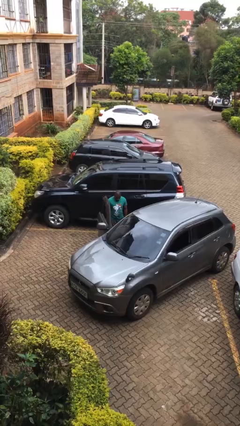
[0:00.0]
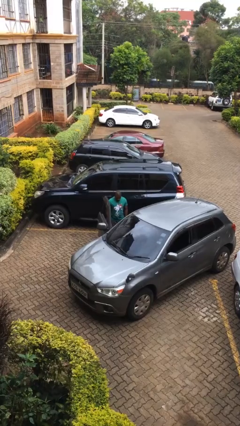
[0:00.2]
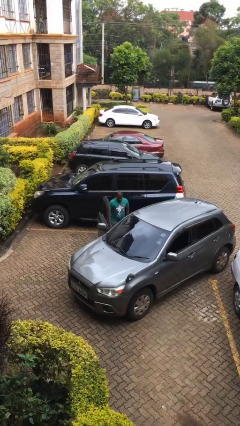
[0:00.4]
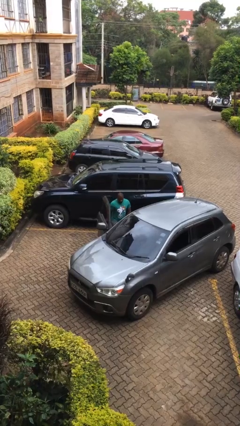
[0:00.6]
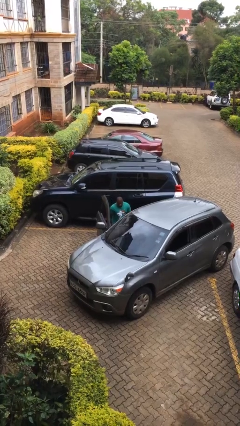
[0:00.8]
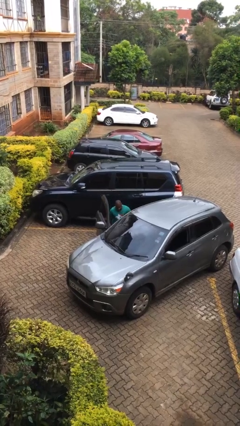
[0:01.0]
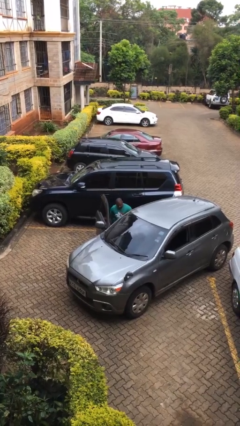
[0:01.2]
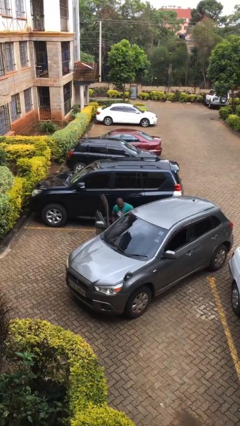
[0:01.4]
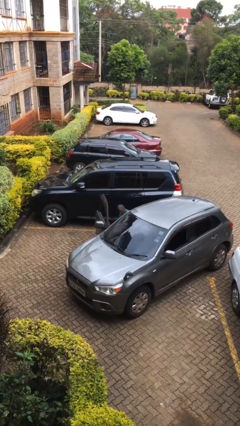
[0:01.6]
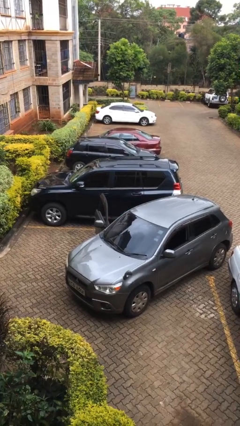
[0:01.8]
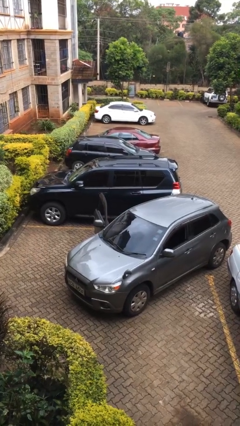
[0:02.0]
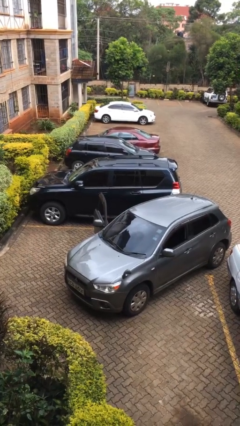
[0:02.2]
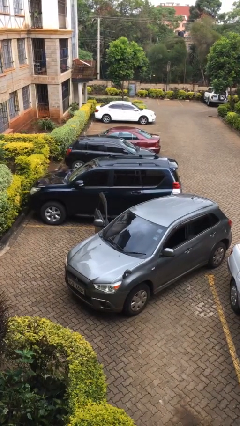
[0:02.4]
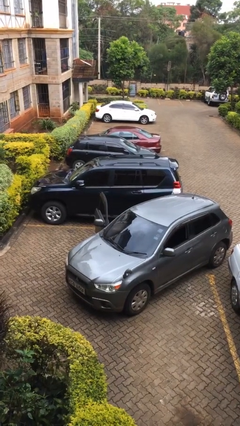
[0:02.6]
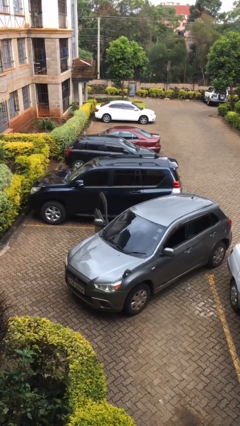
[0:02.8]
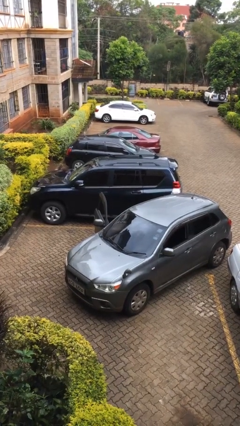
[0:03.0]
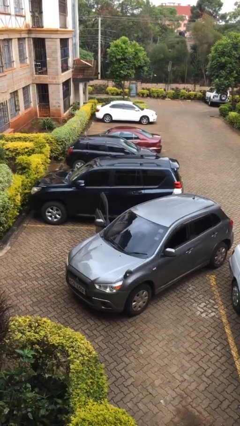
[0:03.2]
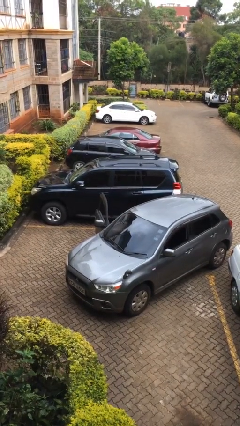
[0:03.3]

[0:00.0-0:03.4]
person enters car

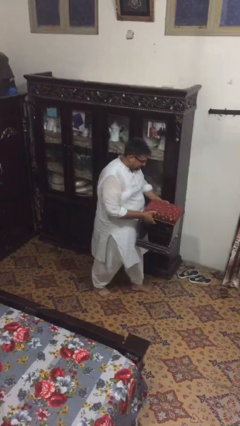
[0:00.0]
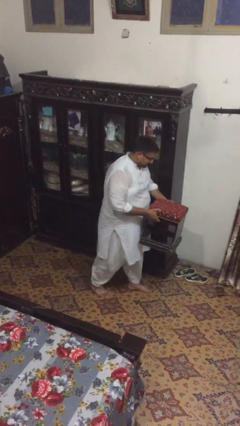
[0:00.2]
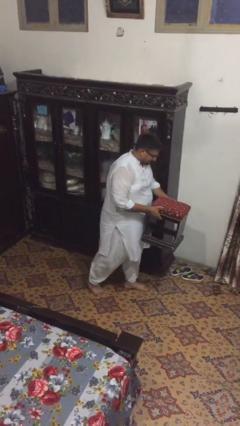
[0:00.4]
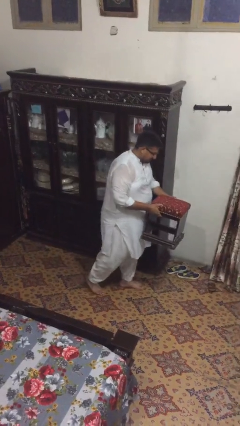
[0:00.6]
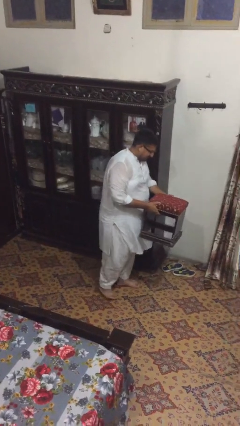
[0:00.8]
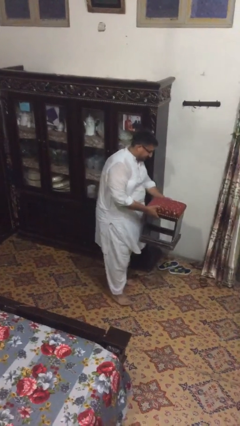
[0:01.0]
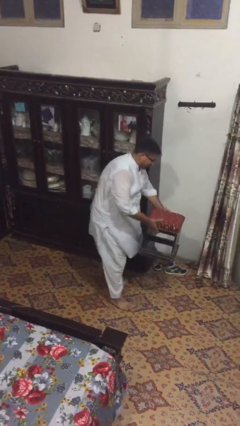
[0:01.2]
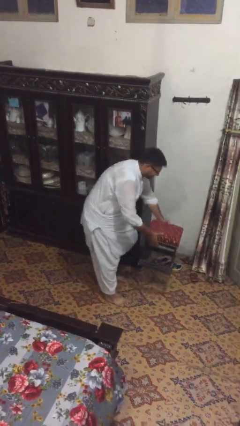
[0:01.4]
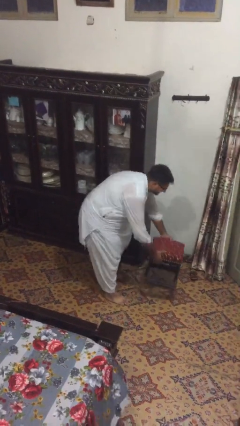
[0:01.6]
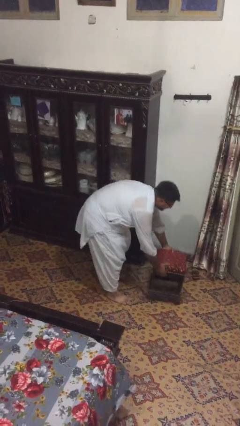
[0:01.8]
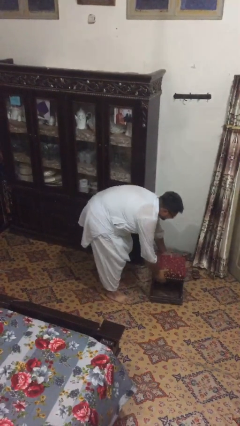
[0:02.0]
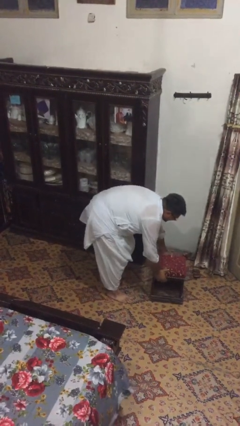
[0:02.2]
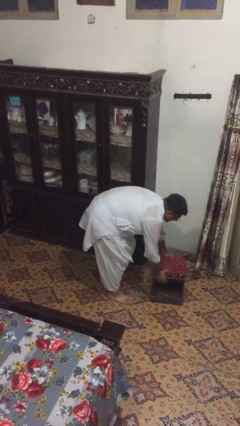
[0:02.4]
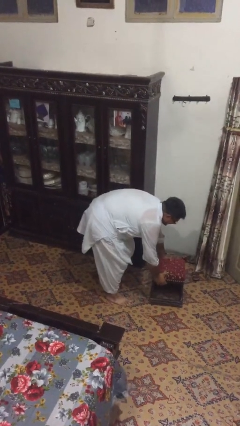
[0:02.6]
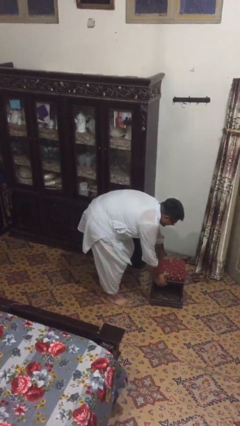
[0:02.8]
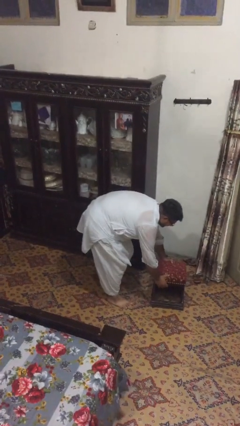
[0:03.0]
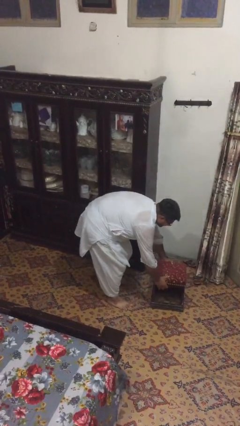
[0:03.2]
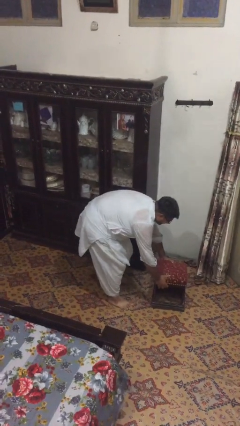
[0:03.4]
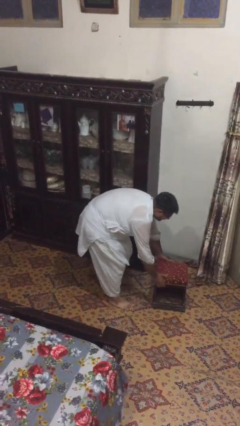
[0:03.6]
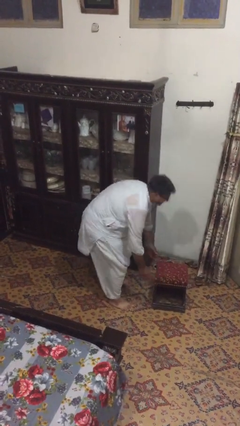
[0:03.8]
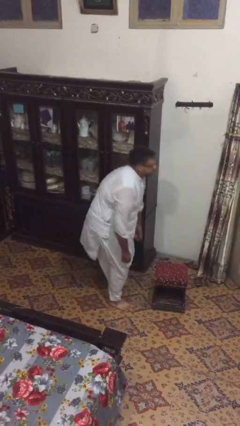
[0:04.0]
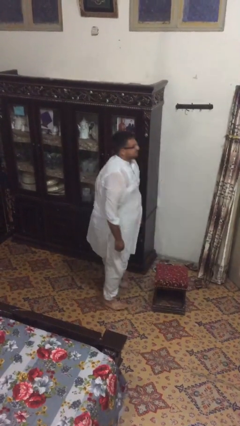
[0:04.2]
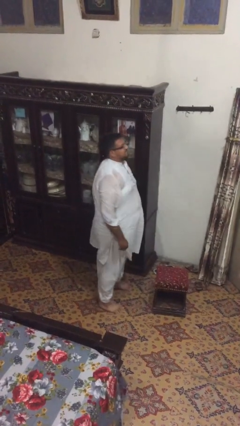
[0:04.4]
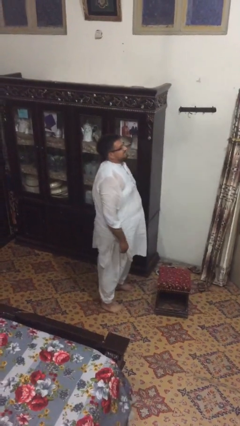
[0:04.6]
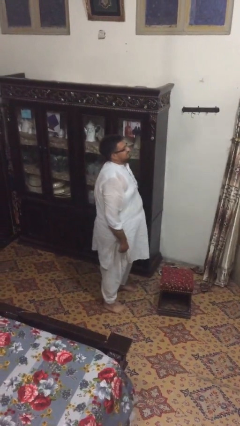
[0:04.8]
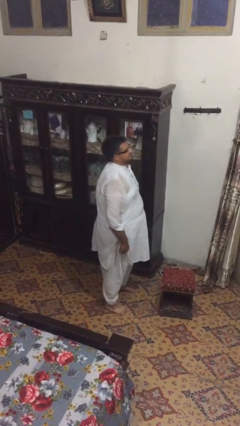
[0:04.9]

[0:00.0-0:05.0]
person puts down object on floor

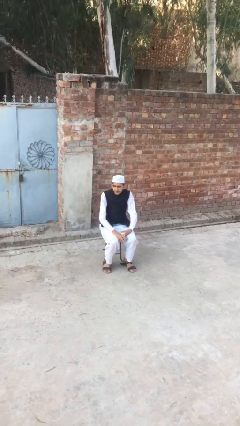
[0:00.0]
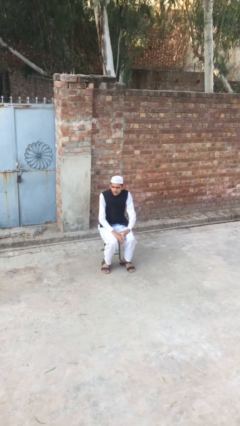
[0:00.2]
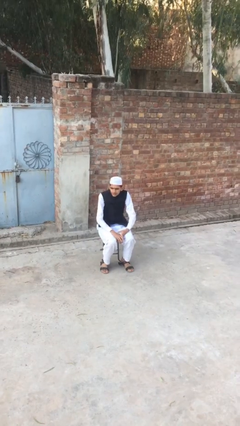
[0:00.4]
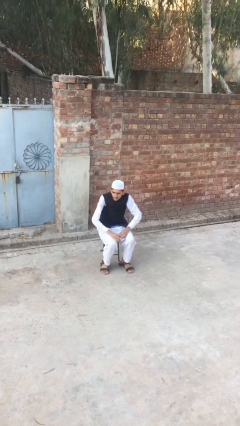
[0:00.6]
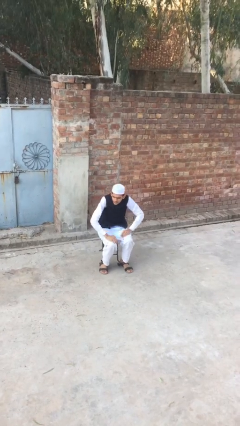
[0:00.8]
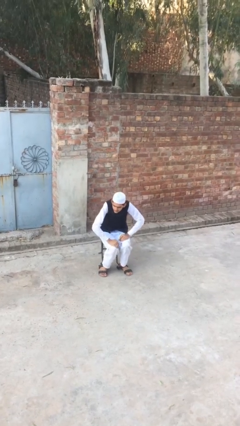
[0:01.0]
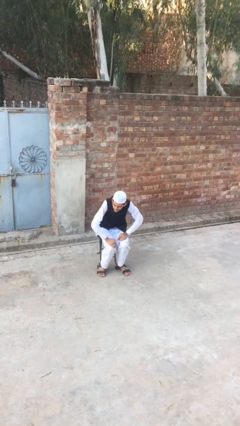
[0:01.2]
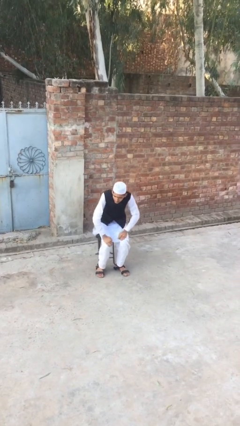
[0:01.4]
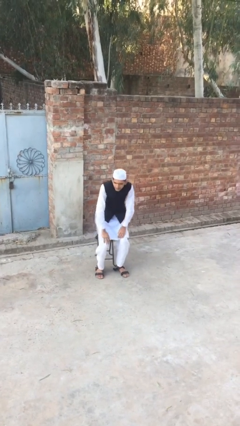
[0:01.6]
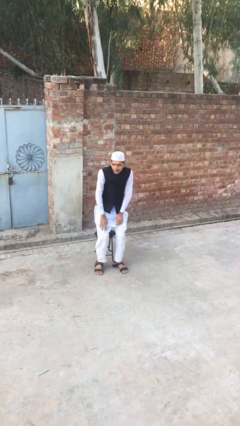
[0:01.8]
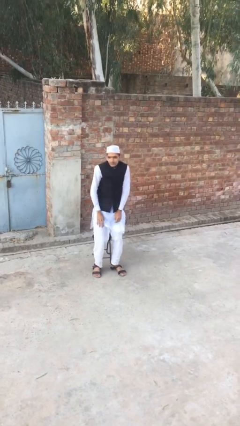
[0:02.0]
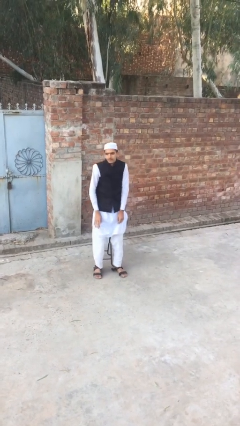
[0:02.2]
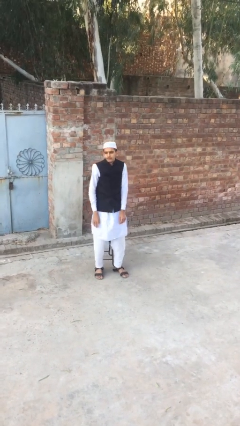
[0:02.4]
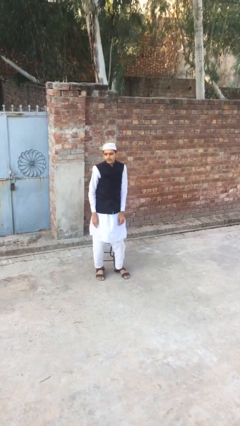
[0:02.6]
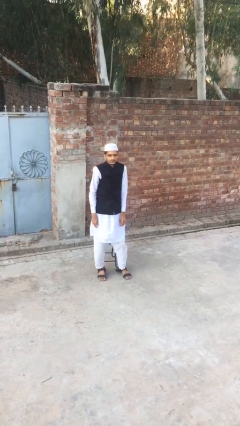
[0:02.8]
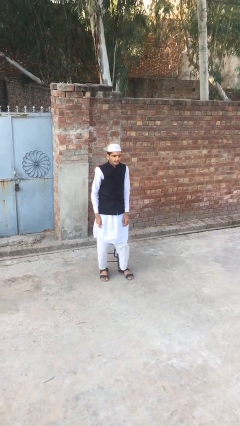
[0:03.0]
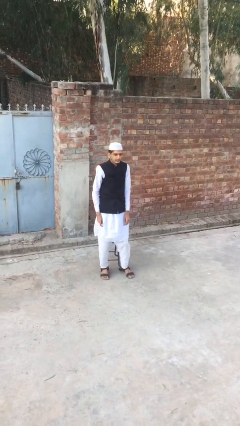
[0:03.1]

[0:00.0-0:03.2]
person stands up

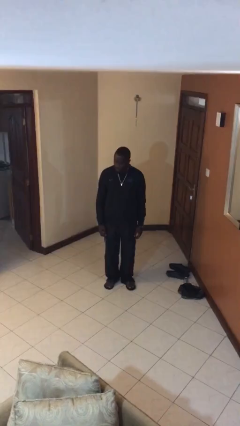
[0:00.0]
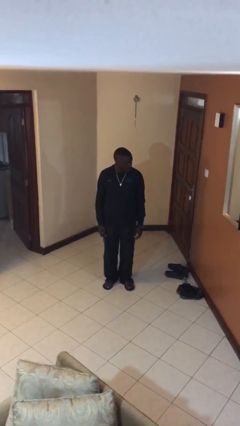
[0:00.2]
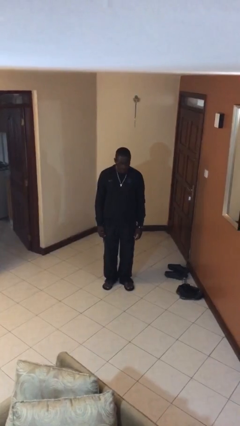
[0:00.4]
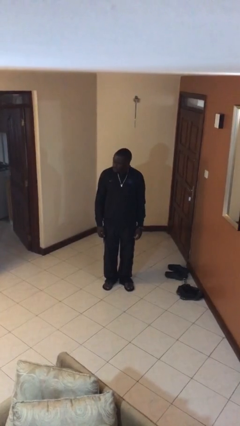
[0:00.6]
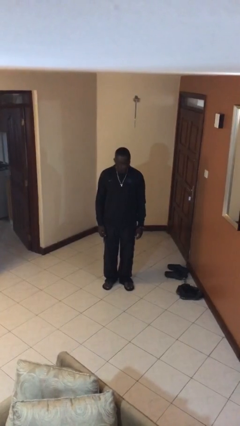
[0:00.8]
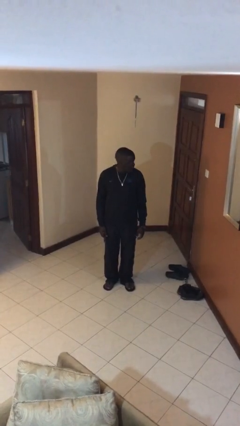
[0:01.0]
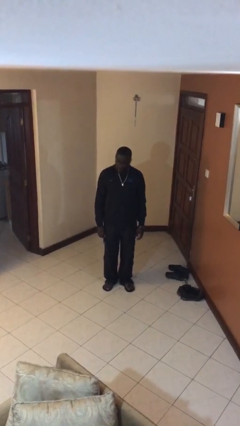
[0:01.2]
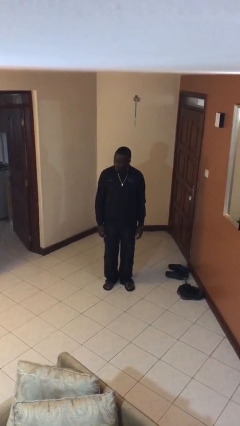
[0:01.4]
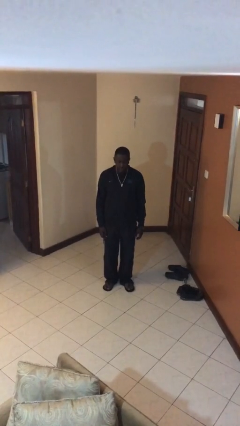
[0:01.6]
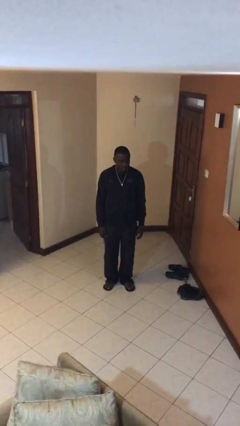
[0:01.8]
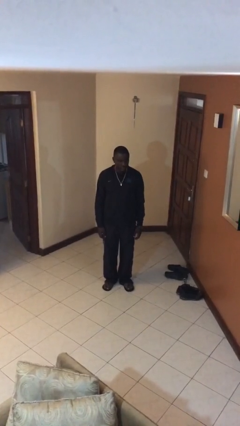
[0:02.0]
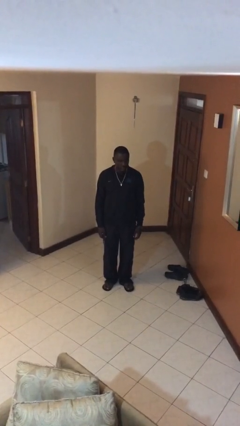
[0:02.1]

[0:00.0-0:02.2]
person shakes head

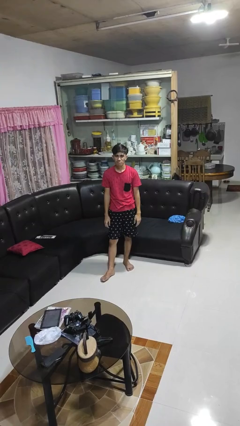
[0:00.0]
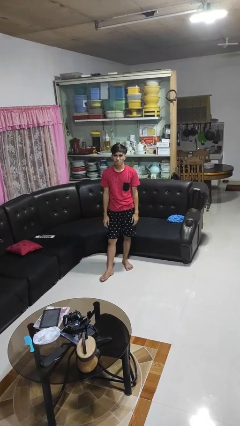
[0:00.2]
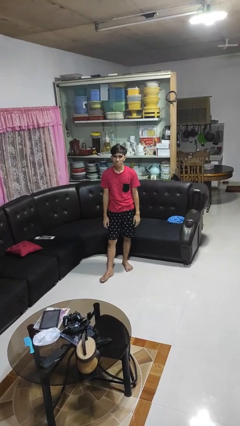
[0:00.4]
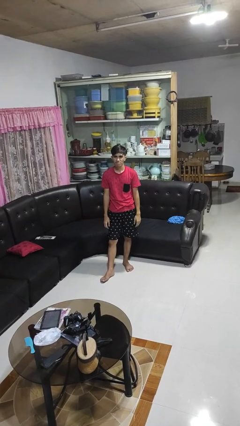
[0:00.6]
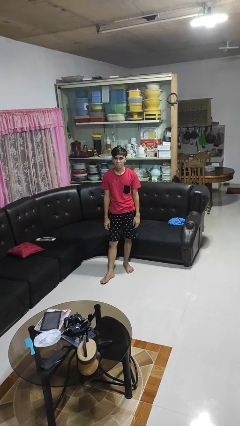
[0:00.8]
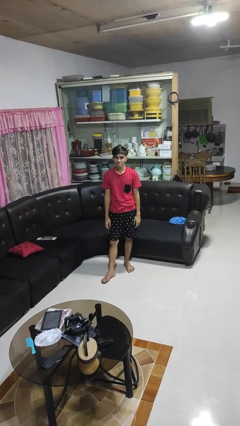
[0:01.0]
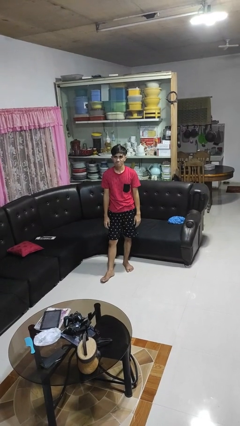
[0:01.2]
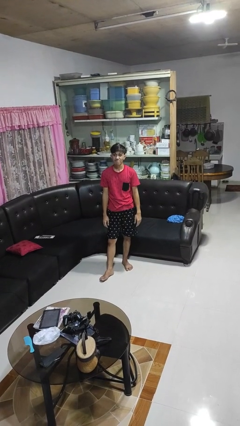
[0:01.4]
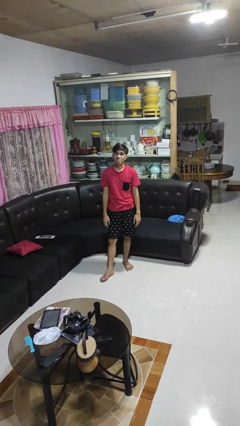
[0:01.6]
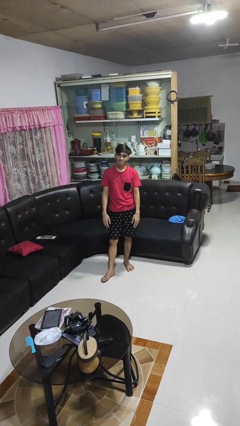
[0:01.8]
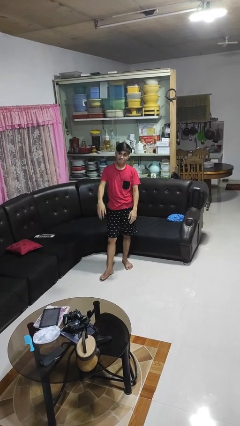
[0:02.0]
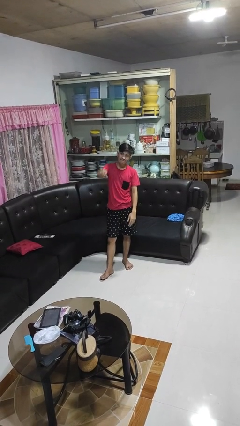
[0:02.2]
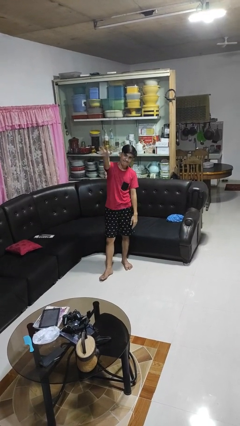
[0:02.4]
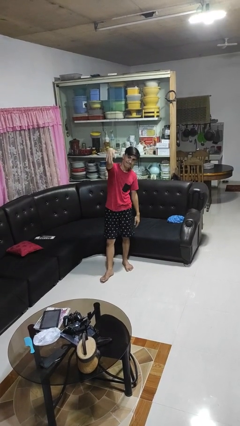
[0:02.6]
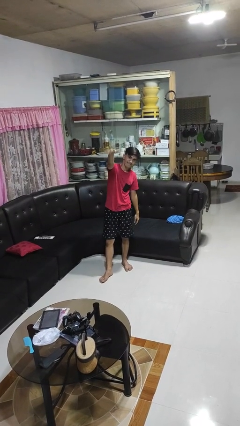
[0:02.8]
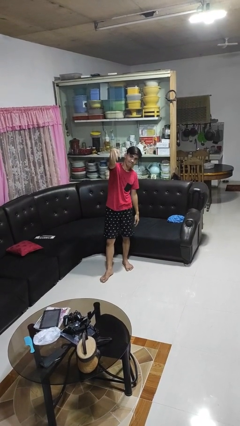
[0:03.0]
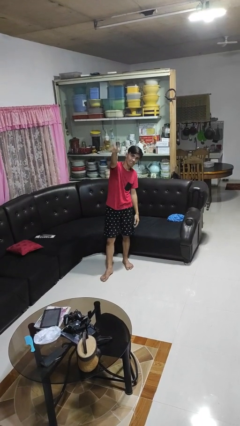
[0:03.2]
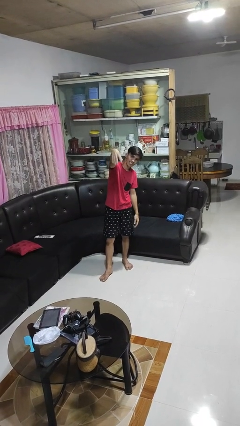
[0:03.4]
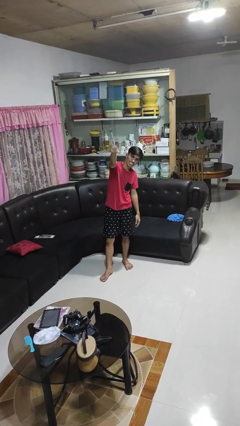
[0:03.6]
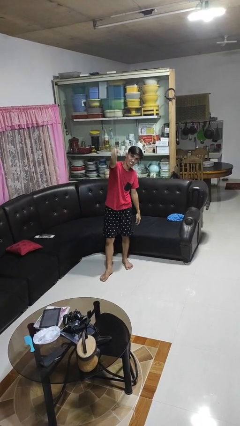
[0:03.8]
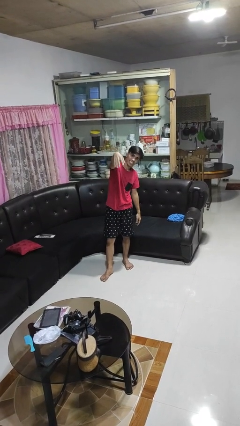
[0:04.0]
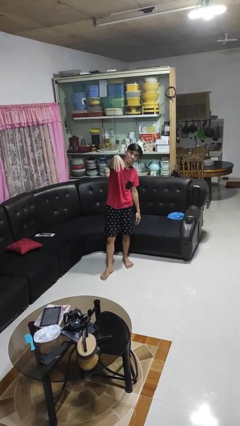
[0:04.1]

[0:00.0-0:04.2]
person gestures come here
